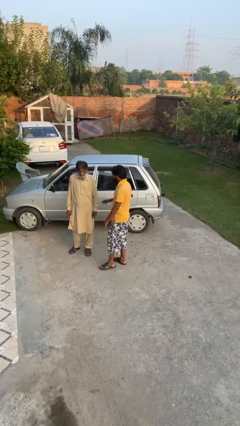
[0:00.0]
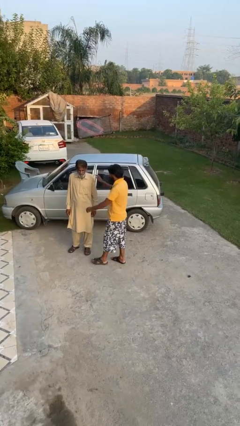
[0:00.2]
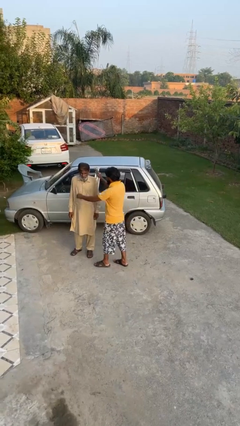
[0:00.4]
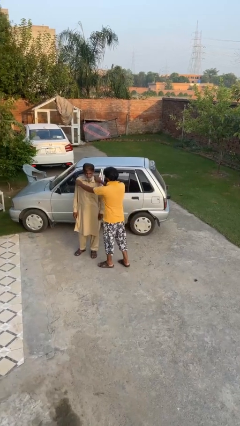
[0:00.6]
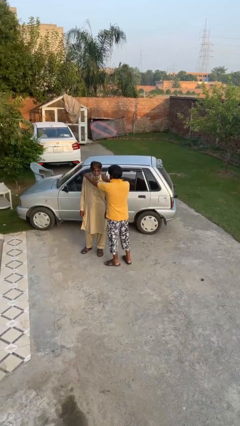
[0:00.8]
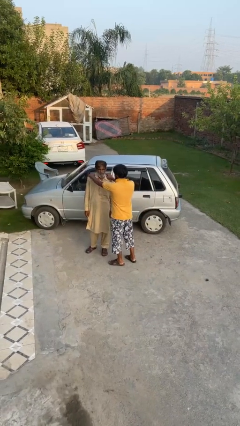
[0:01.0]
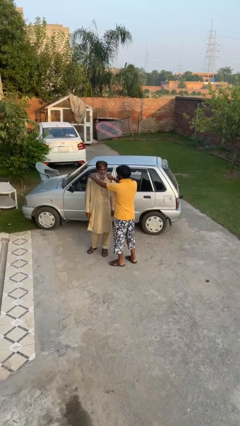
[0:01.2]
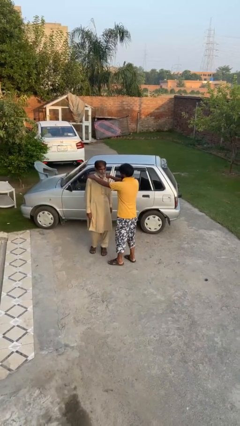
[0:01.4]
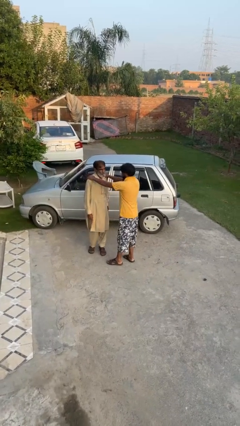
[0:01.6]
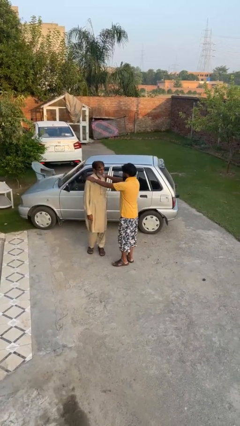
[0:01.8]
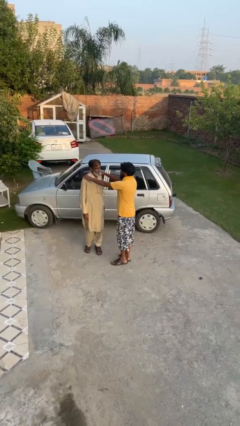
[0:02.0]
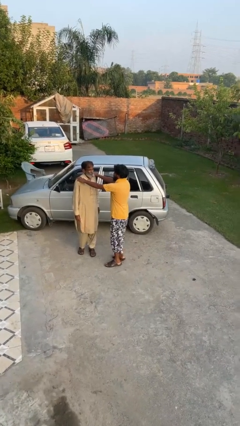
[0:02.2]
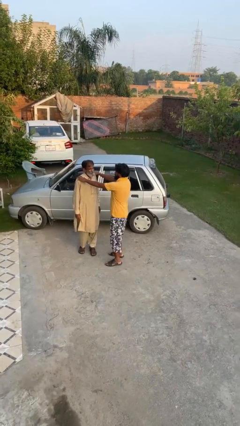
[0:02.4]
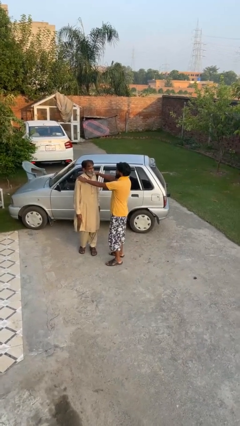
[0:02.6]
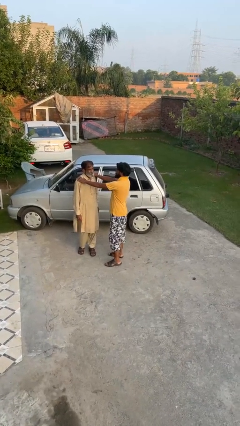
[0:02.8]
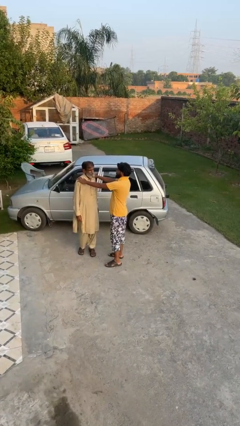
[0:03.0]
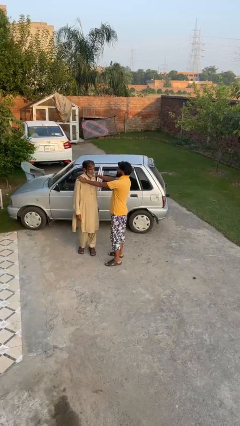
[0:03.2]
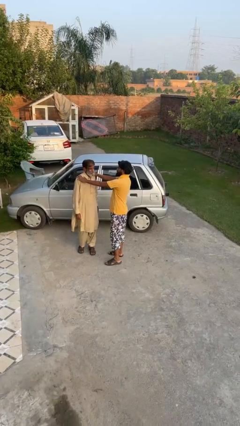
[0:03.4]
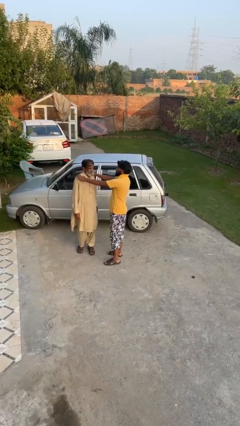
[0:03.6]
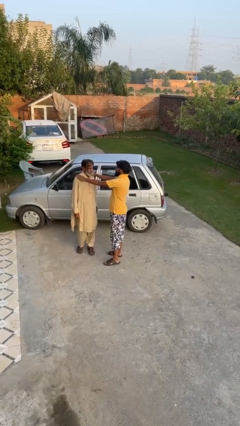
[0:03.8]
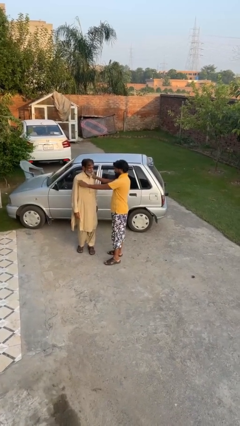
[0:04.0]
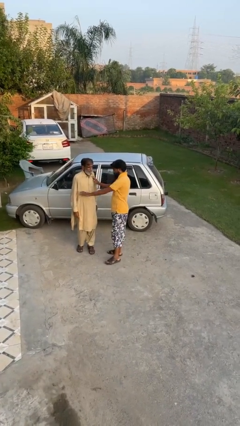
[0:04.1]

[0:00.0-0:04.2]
person pounds shoulders of person

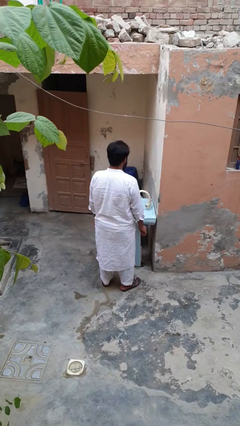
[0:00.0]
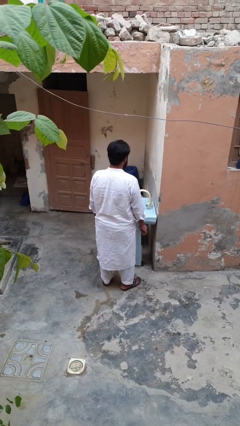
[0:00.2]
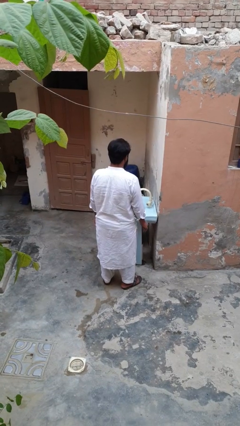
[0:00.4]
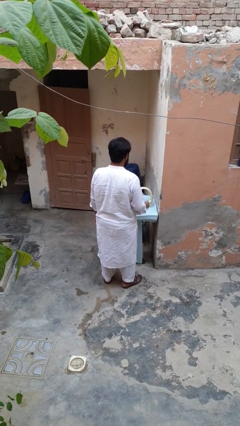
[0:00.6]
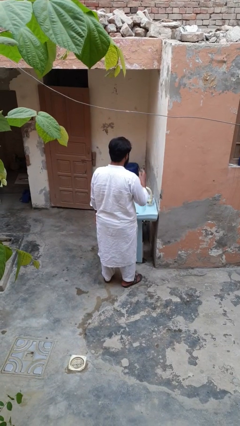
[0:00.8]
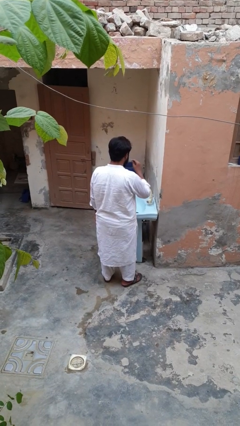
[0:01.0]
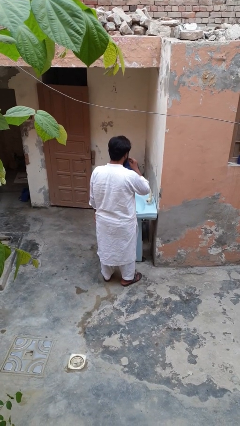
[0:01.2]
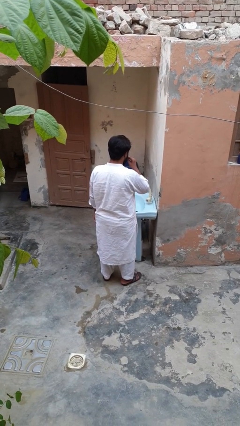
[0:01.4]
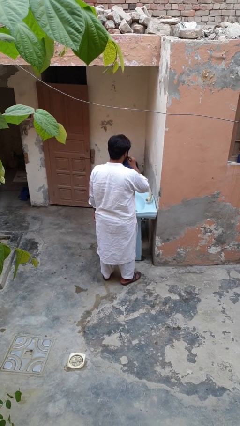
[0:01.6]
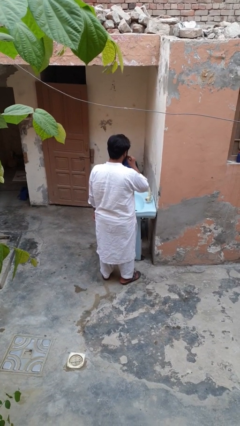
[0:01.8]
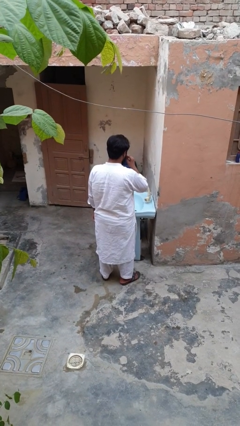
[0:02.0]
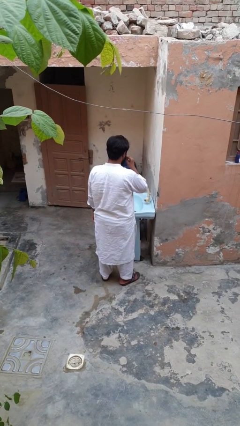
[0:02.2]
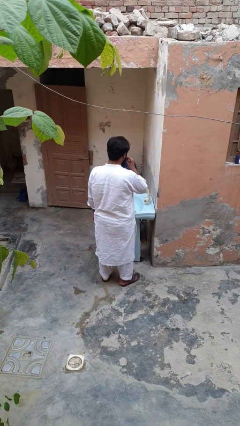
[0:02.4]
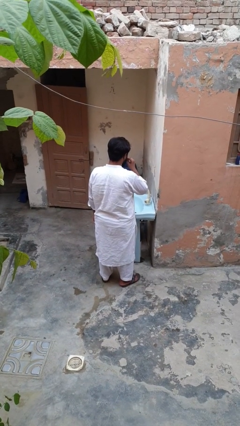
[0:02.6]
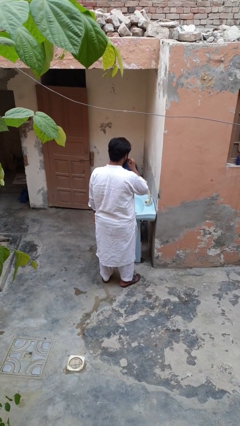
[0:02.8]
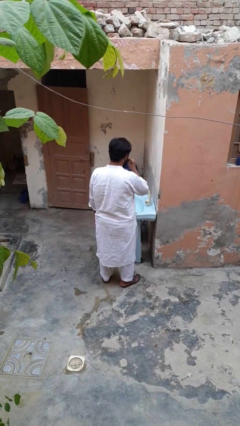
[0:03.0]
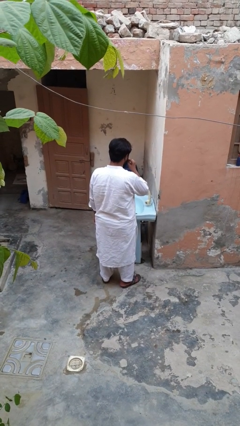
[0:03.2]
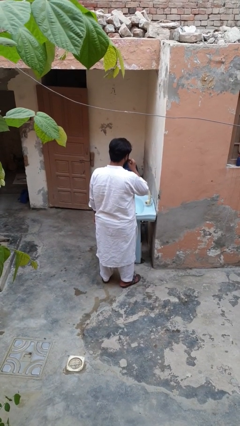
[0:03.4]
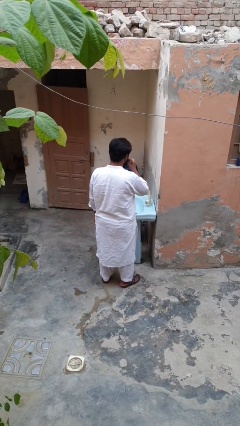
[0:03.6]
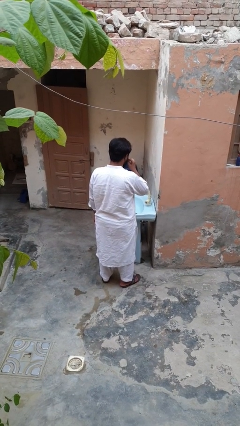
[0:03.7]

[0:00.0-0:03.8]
person flosses

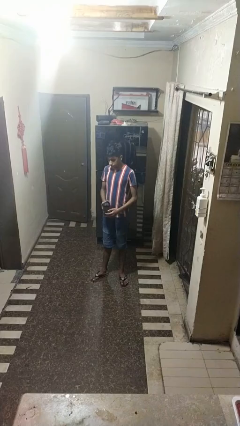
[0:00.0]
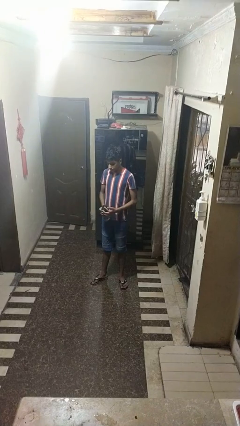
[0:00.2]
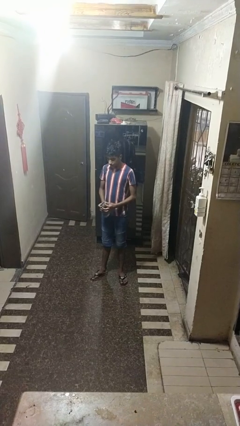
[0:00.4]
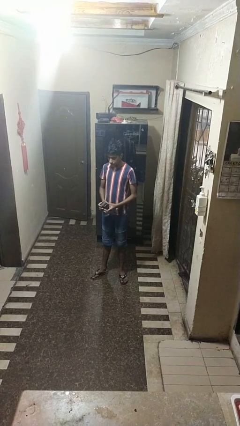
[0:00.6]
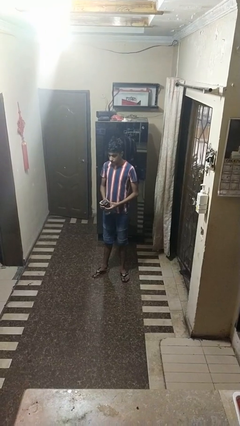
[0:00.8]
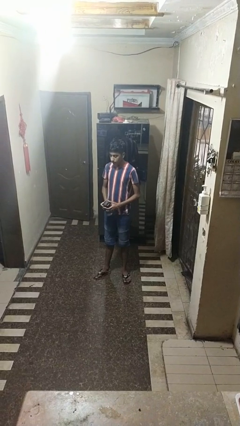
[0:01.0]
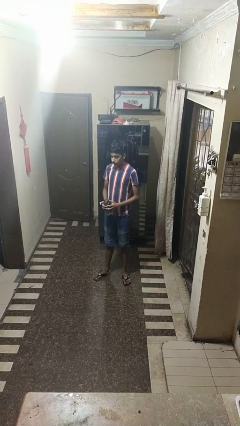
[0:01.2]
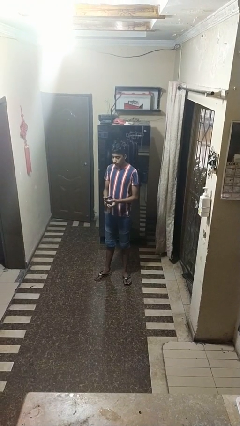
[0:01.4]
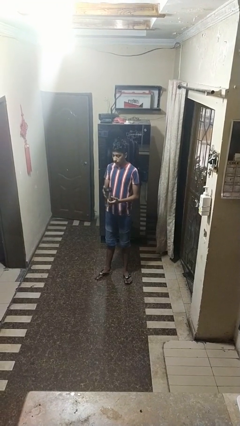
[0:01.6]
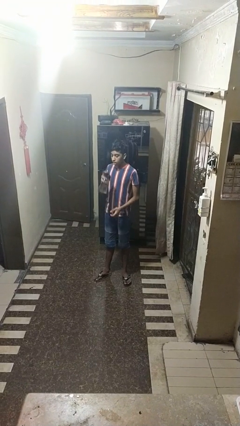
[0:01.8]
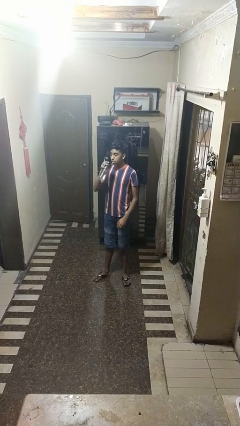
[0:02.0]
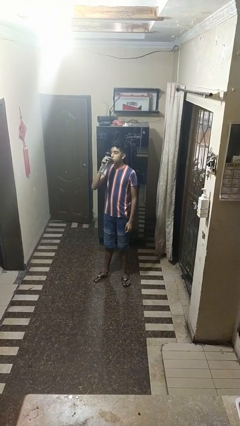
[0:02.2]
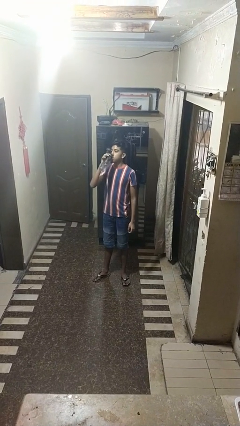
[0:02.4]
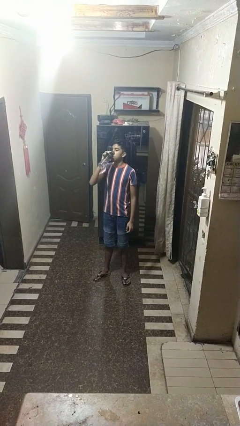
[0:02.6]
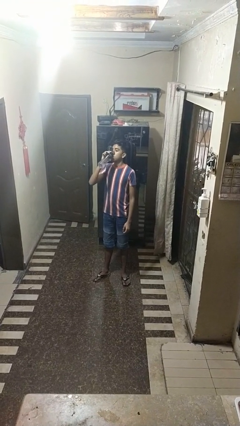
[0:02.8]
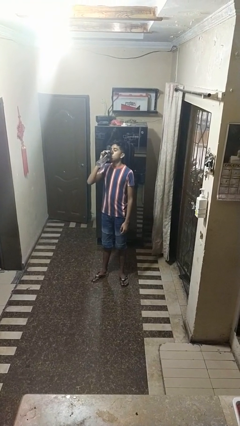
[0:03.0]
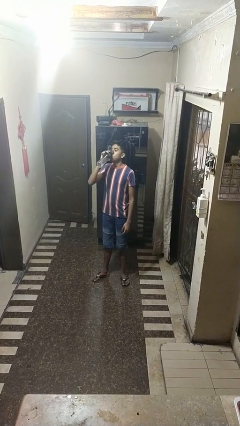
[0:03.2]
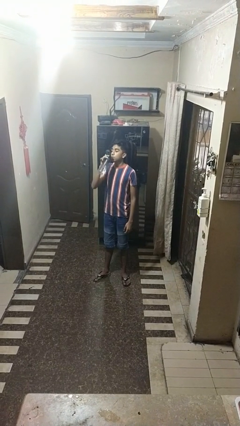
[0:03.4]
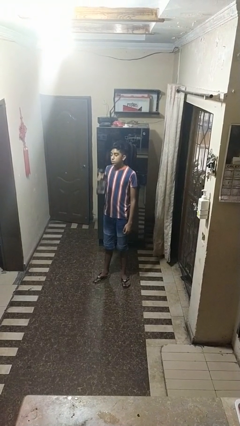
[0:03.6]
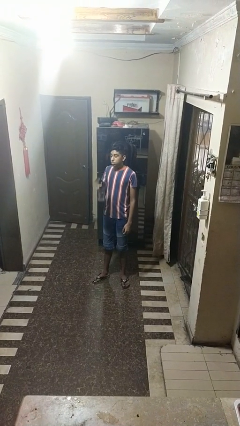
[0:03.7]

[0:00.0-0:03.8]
person drinks from bottle

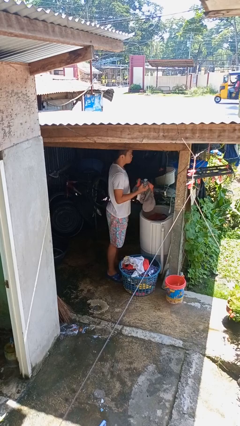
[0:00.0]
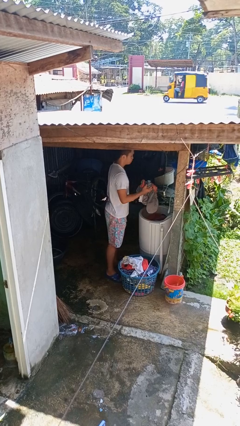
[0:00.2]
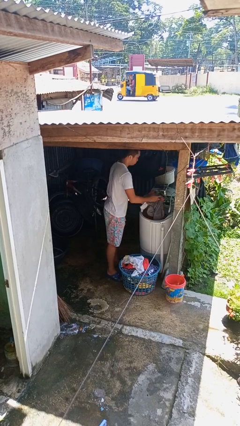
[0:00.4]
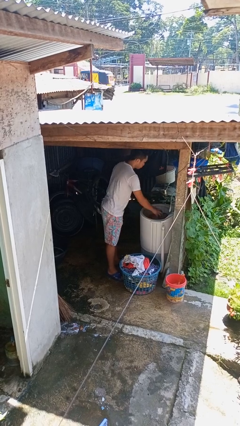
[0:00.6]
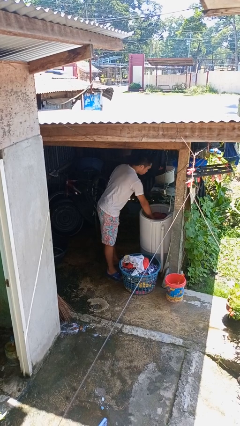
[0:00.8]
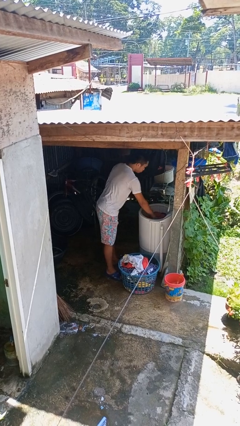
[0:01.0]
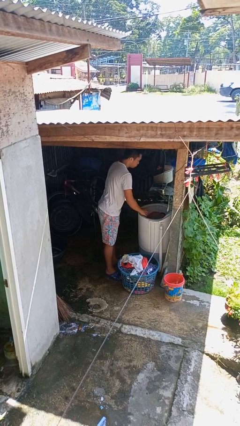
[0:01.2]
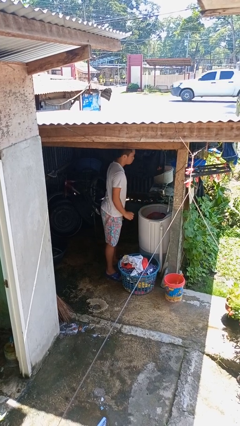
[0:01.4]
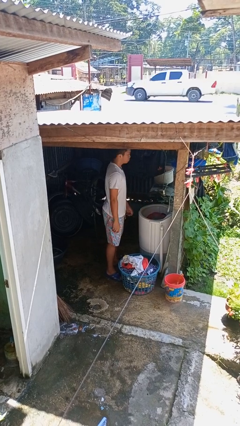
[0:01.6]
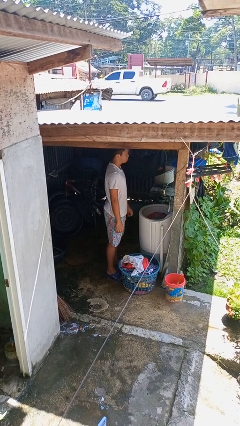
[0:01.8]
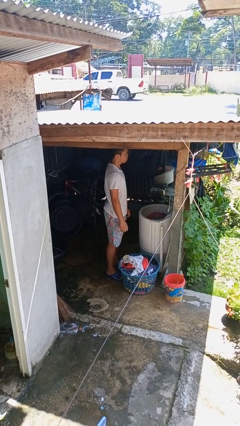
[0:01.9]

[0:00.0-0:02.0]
person loads clotheswasher

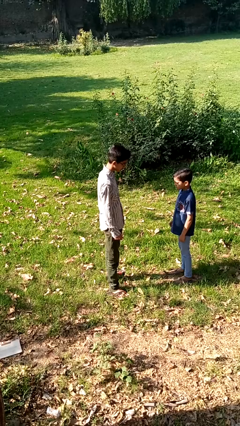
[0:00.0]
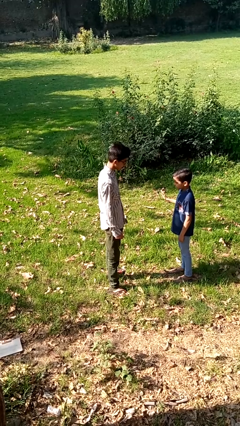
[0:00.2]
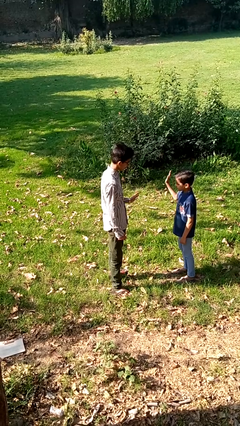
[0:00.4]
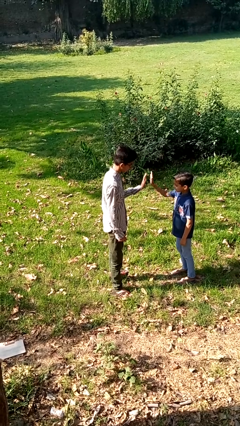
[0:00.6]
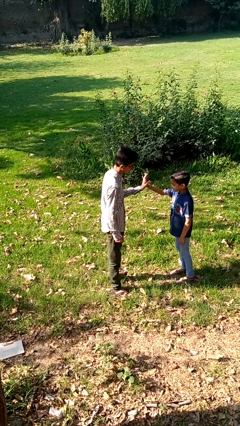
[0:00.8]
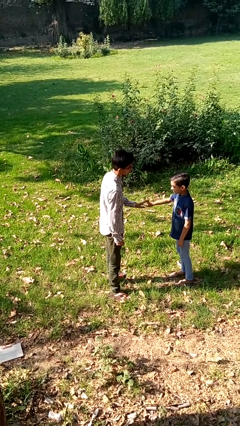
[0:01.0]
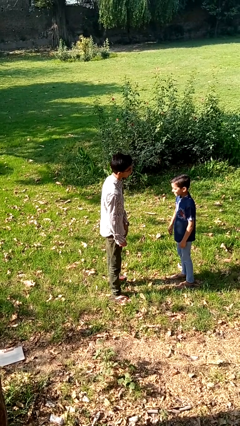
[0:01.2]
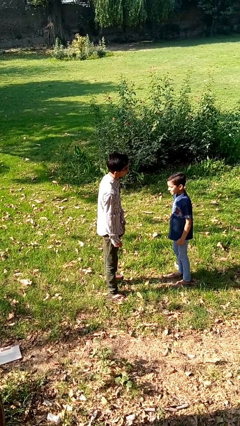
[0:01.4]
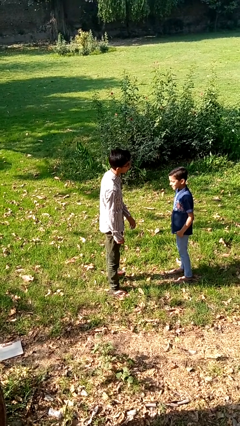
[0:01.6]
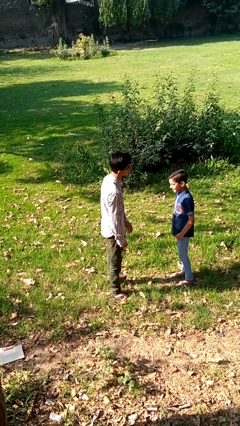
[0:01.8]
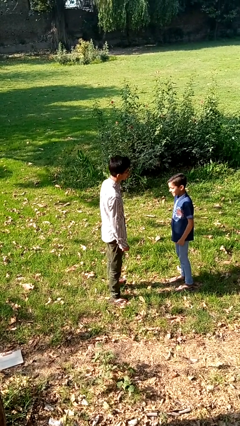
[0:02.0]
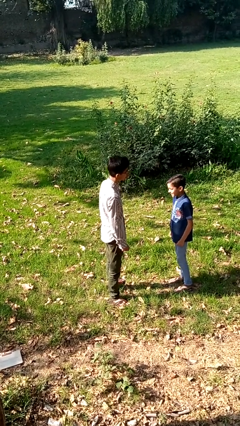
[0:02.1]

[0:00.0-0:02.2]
person highfives hand

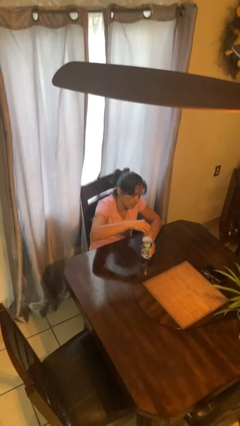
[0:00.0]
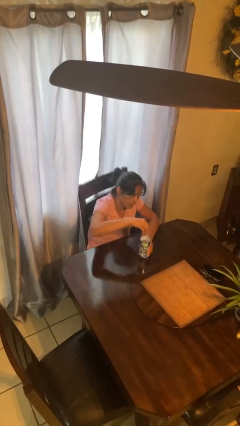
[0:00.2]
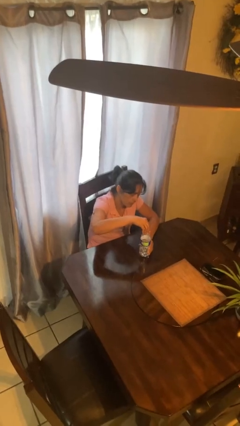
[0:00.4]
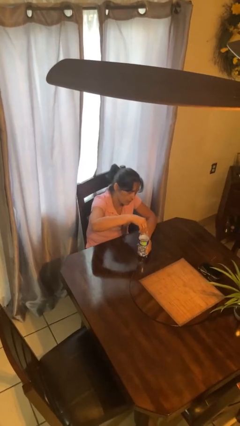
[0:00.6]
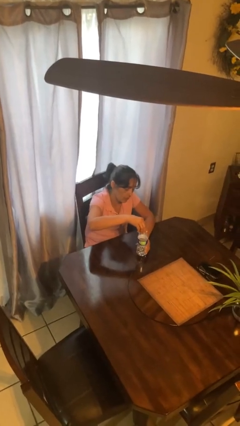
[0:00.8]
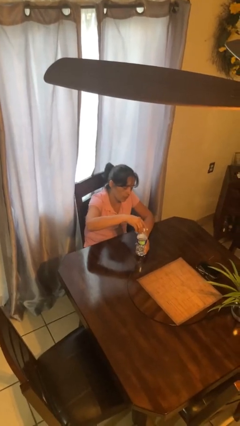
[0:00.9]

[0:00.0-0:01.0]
person screws lid to bottle

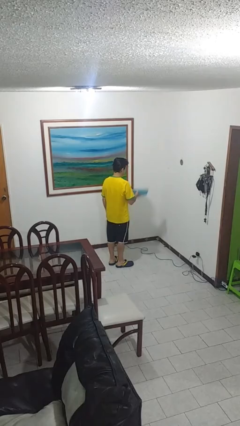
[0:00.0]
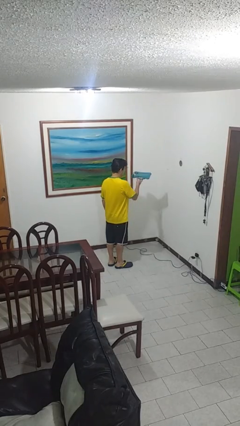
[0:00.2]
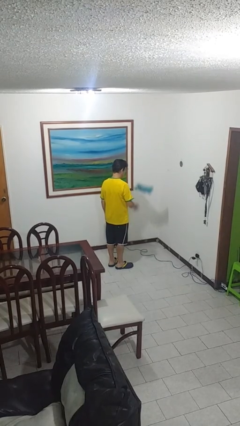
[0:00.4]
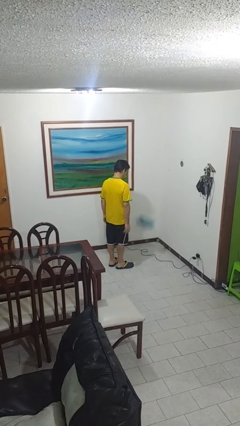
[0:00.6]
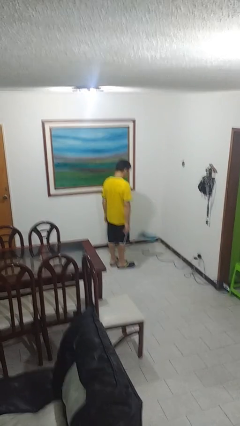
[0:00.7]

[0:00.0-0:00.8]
person throws object into air
